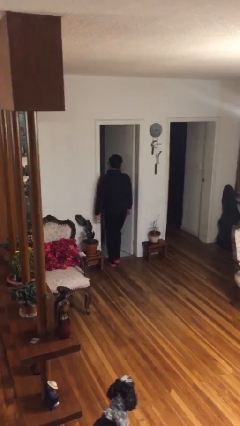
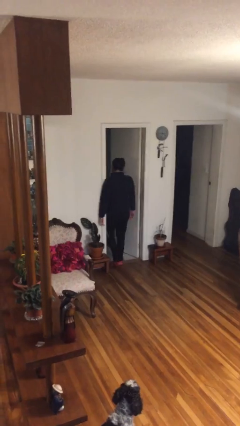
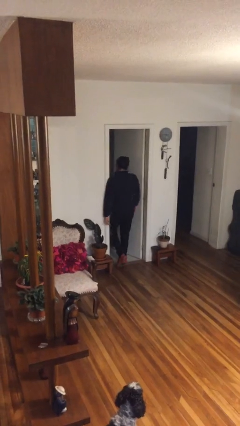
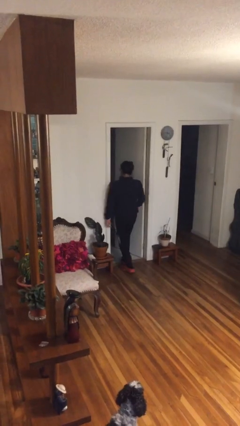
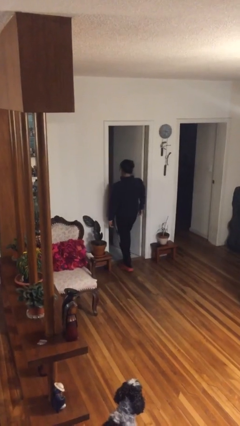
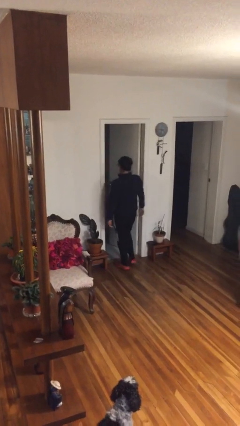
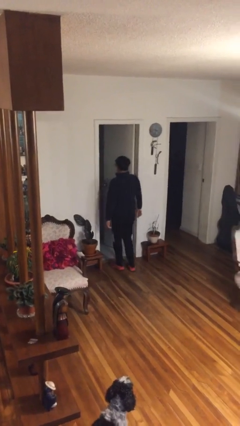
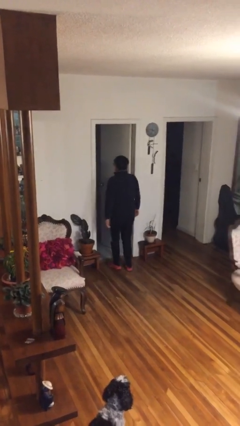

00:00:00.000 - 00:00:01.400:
person bumps into wall

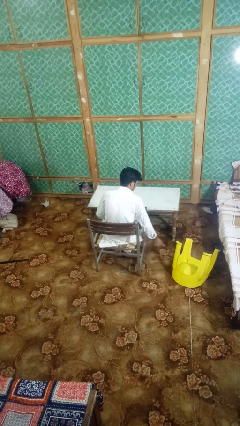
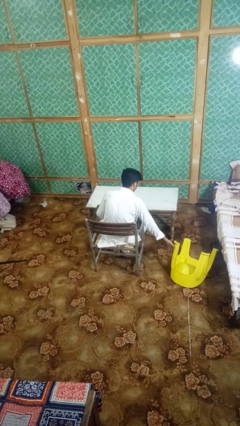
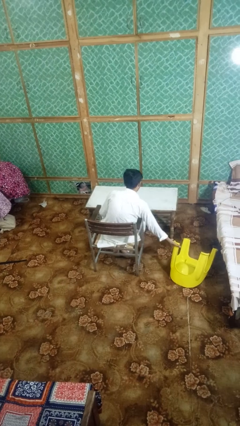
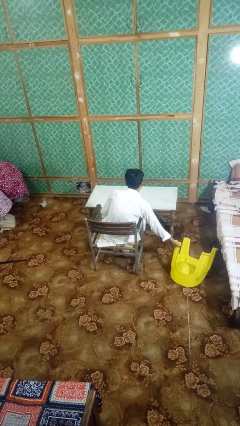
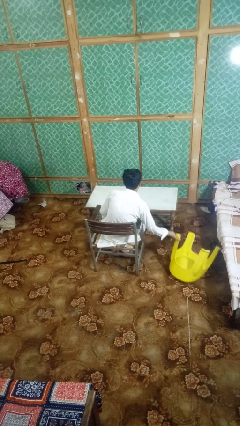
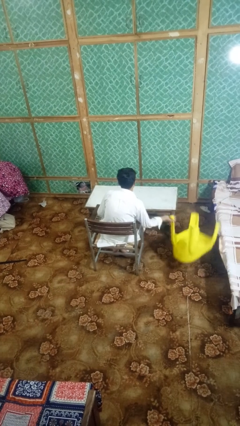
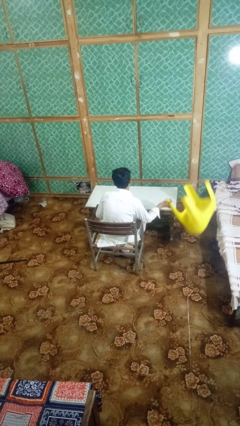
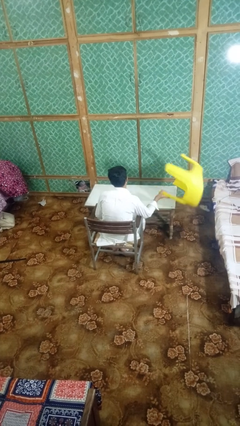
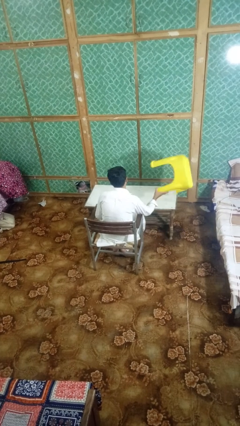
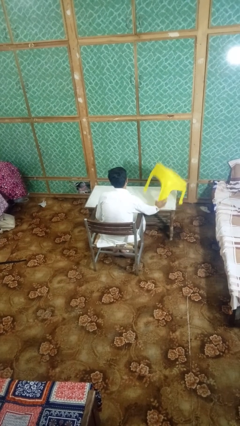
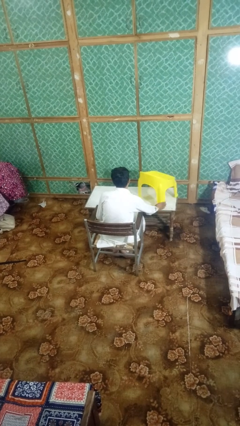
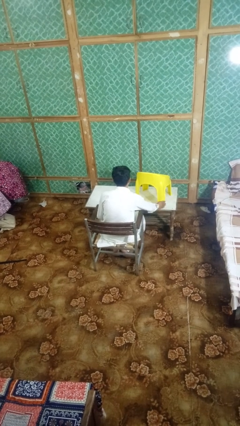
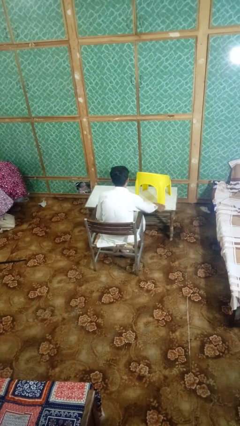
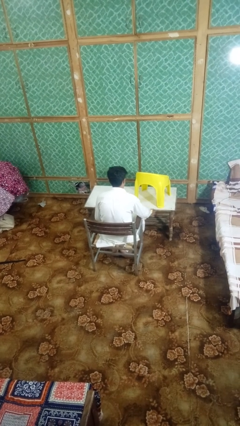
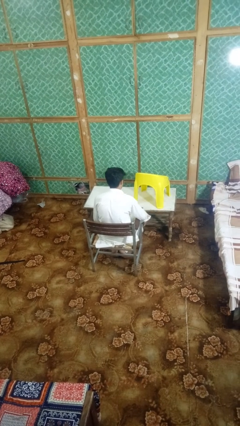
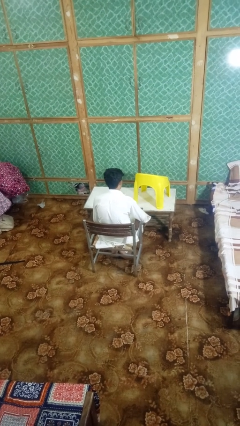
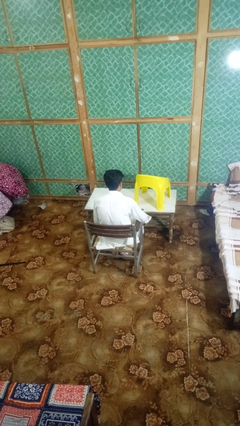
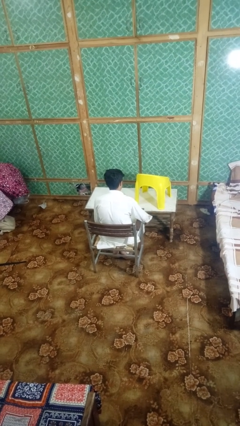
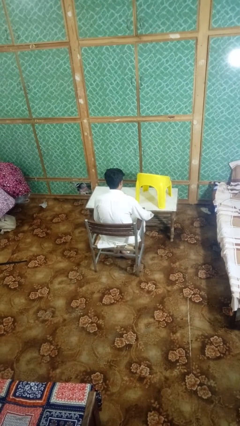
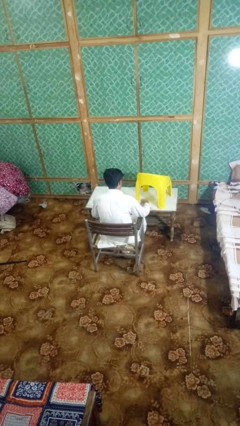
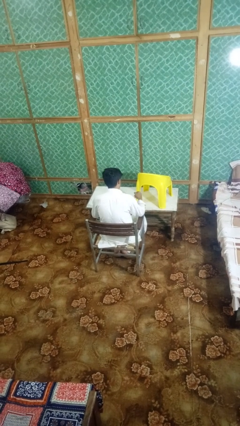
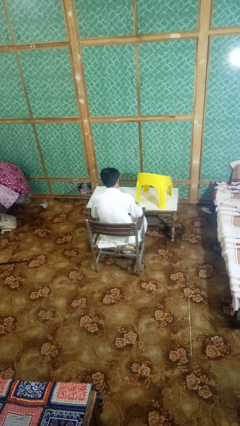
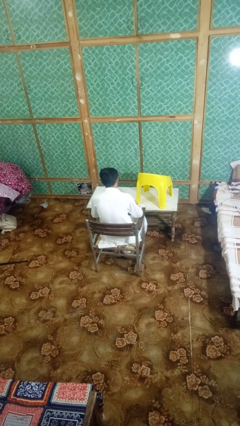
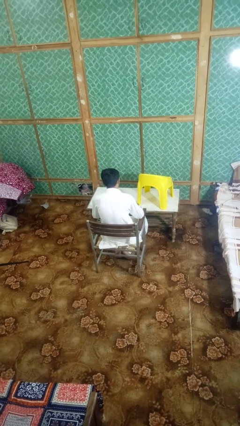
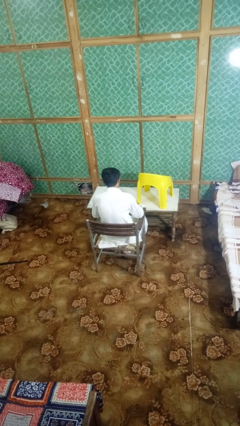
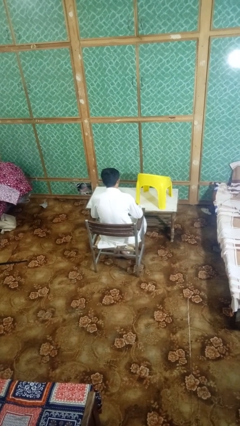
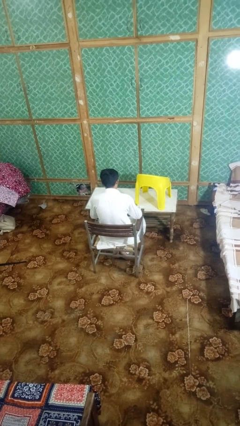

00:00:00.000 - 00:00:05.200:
person sets upright furniture

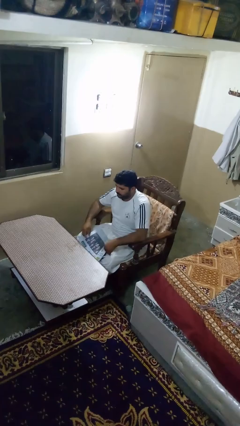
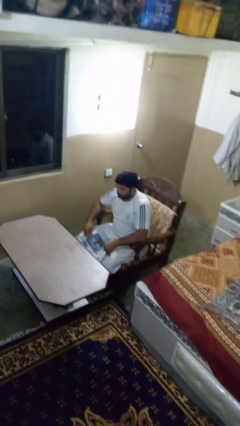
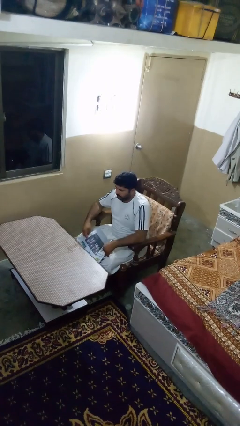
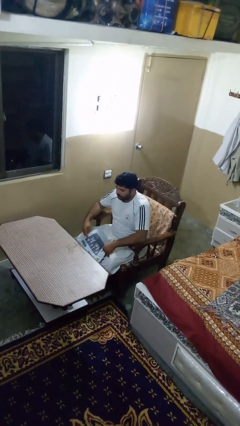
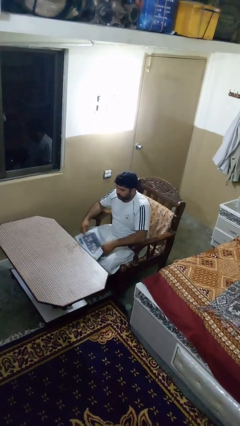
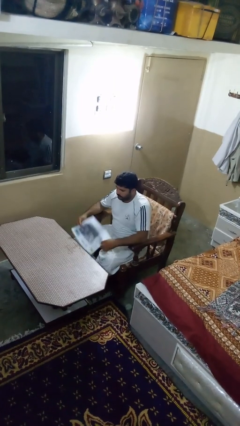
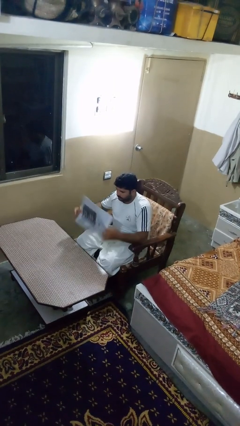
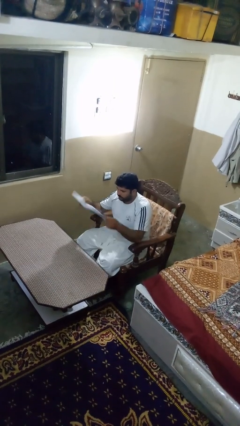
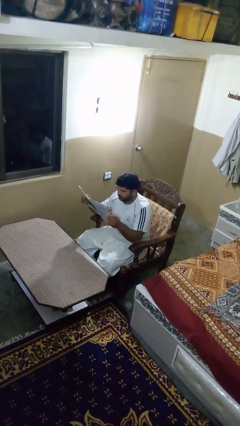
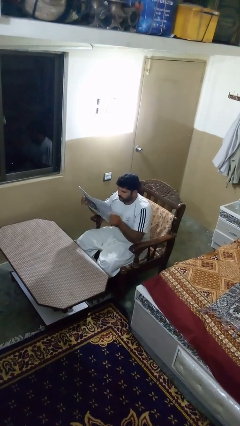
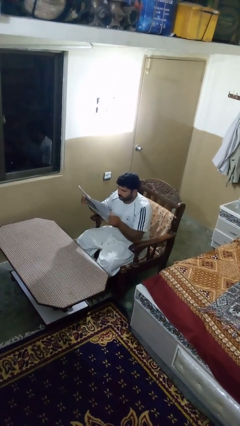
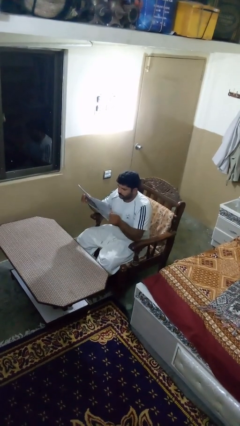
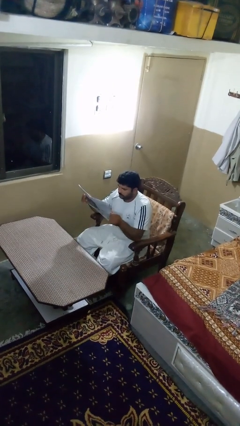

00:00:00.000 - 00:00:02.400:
person reads newspaper

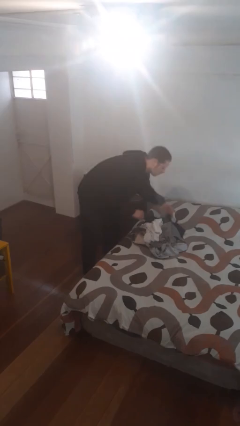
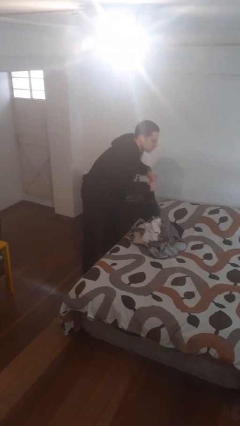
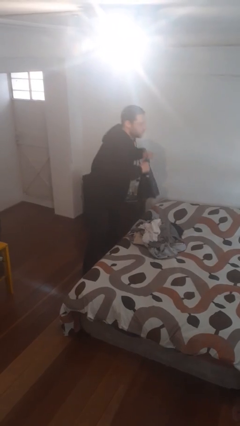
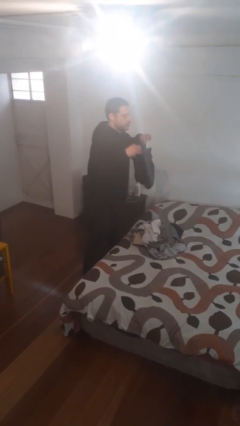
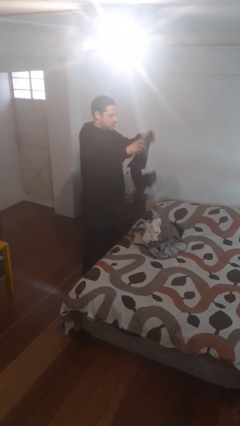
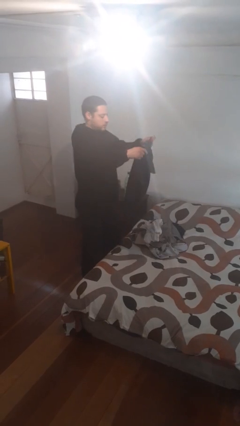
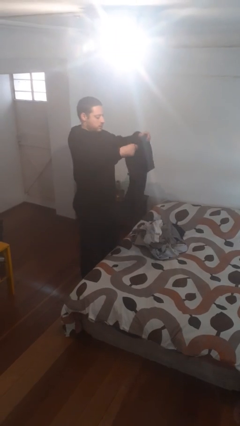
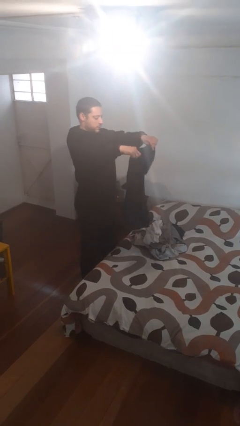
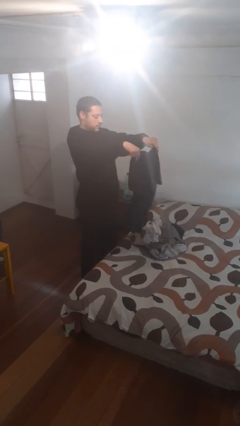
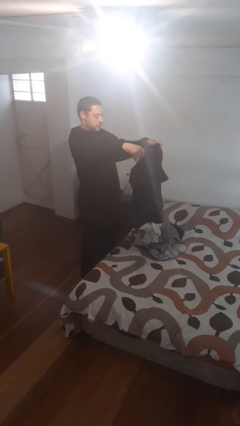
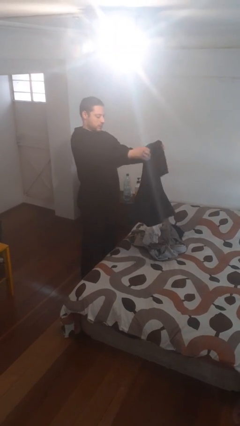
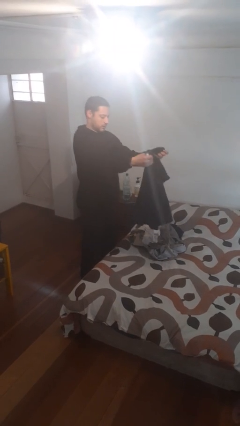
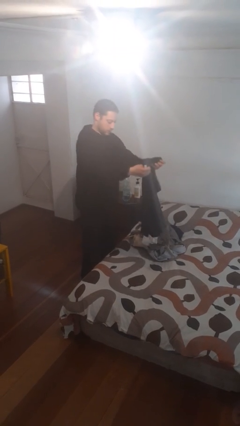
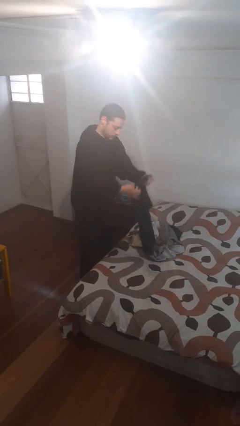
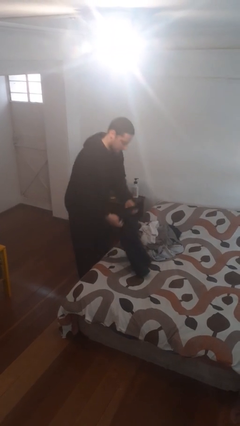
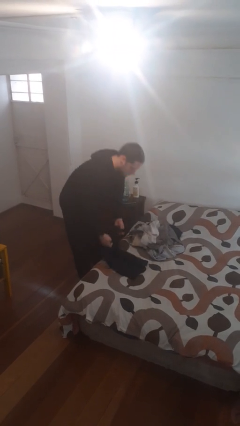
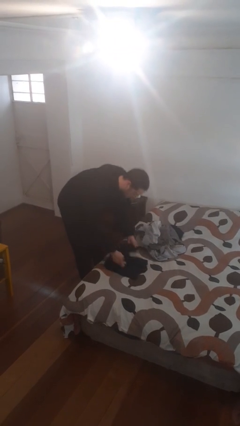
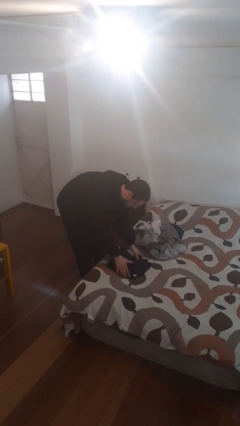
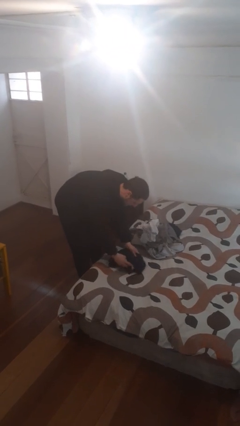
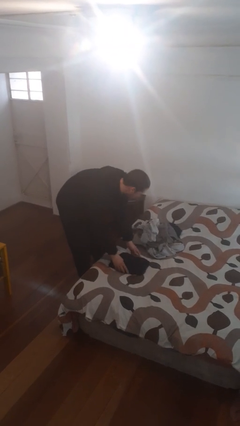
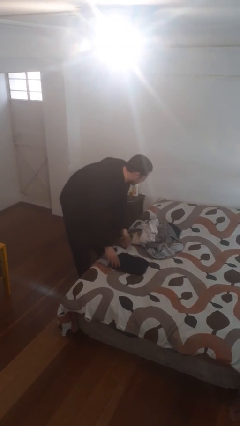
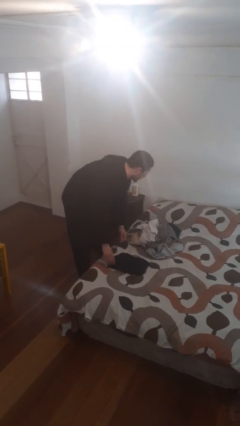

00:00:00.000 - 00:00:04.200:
person folds shirt

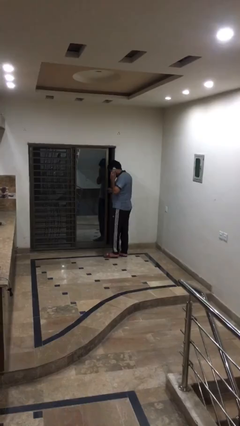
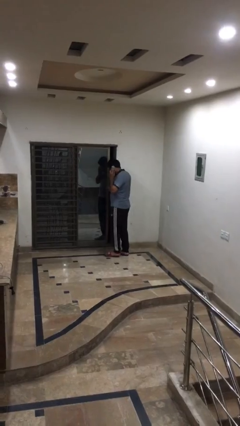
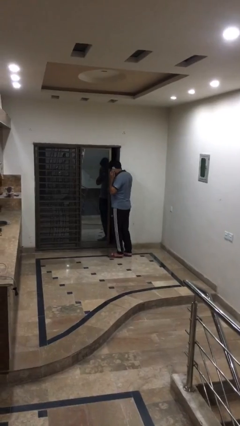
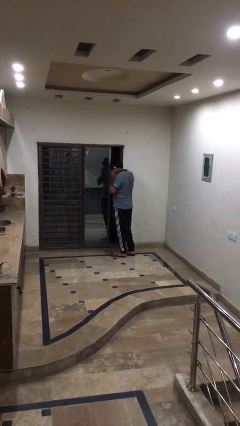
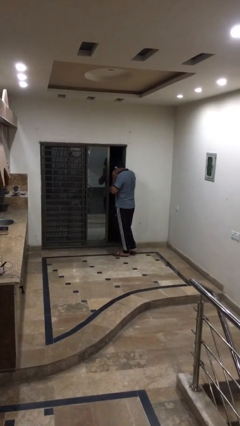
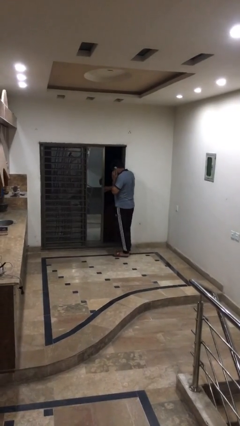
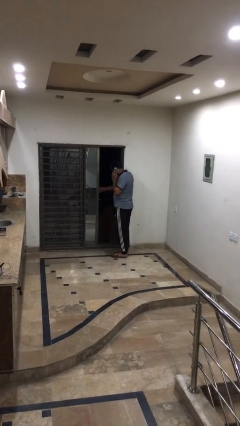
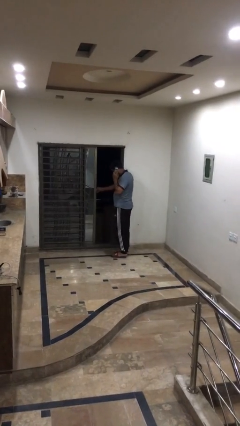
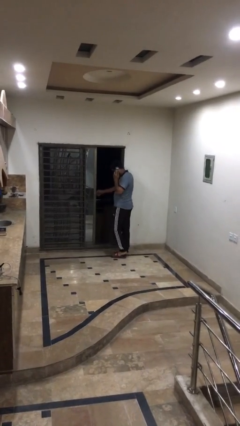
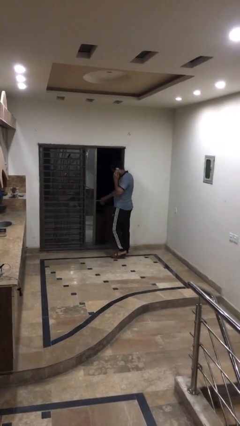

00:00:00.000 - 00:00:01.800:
person opens facility door

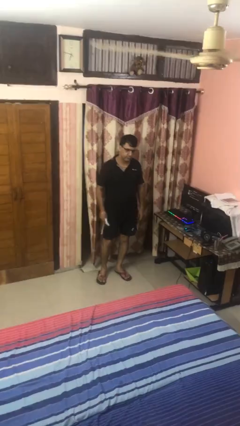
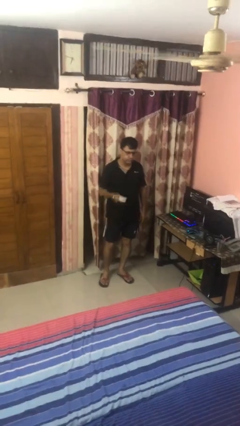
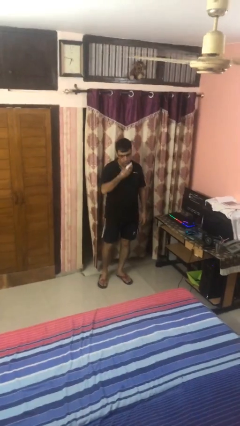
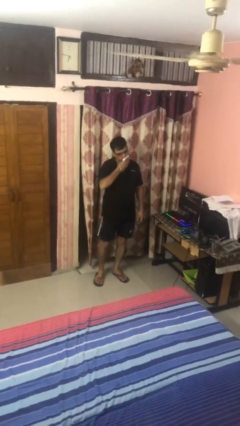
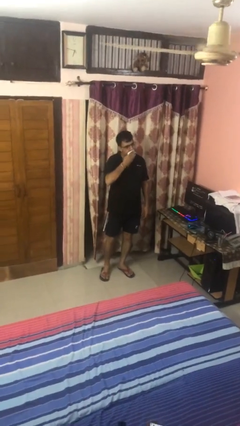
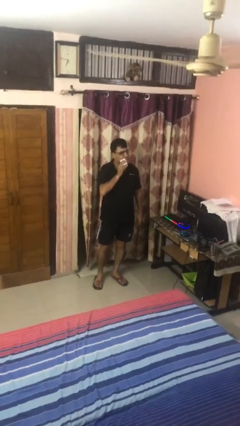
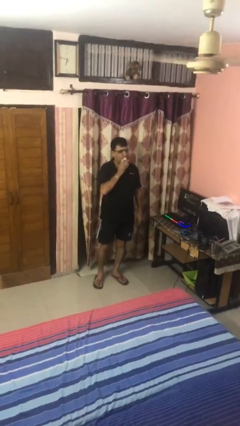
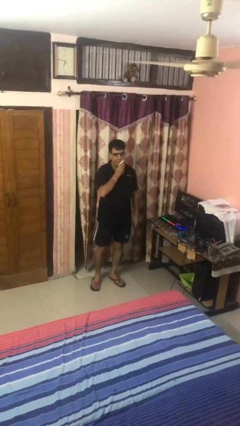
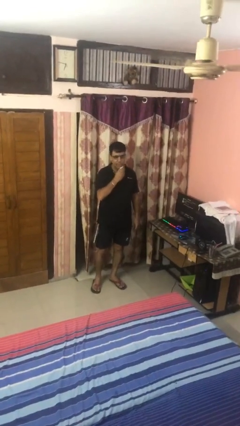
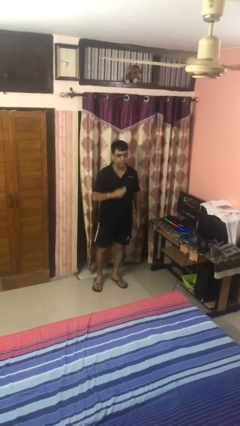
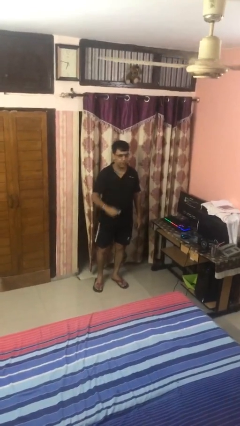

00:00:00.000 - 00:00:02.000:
person wipes mouth with napkin
